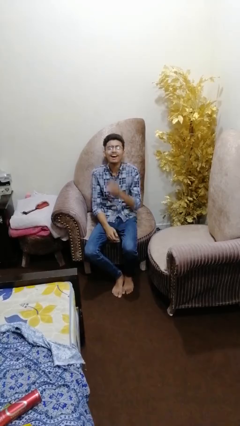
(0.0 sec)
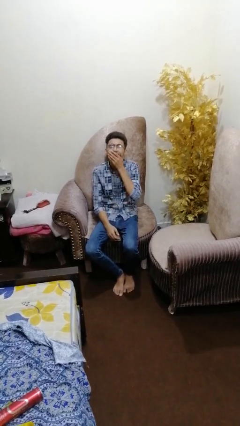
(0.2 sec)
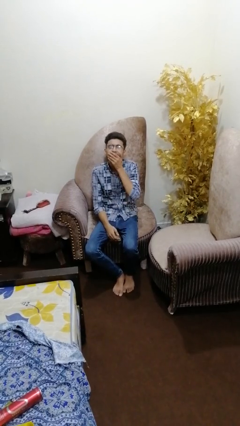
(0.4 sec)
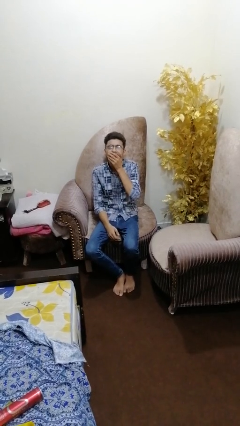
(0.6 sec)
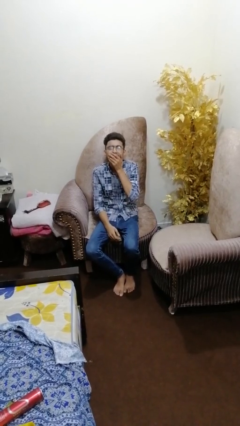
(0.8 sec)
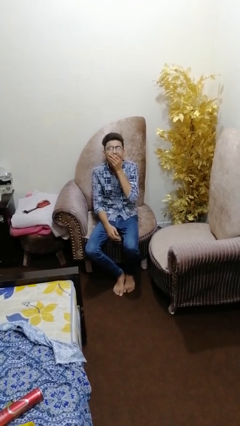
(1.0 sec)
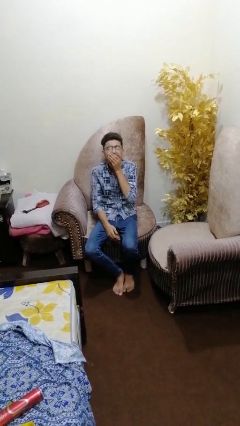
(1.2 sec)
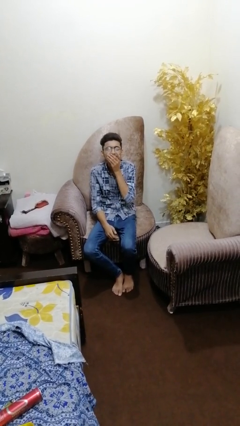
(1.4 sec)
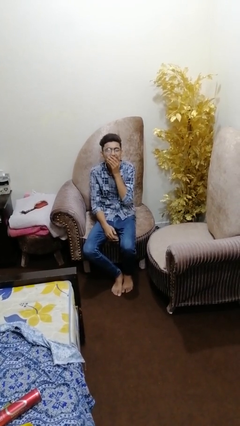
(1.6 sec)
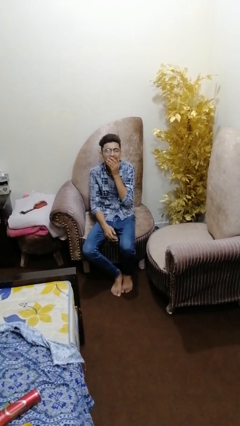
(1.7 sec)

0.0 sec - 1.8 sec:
person yawns

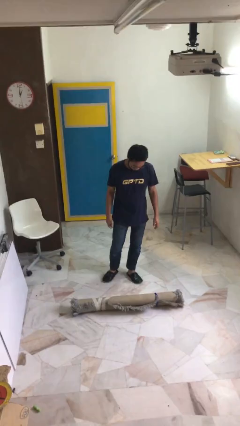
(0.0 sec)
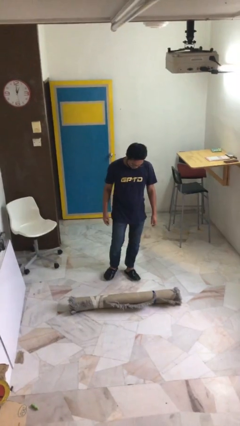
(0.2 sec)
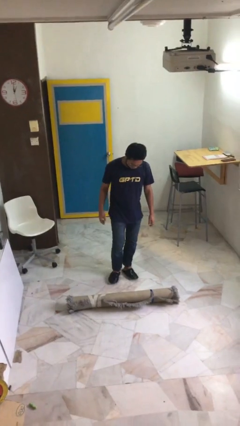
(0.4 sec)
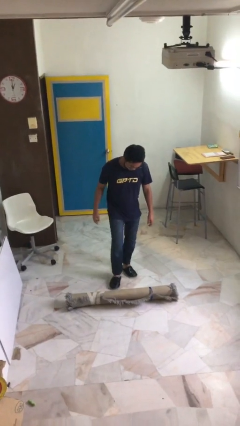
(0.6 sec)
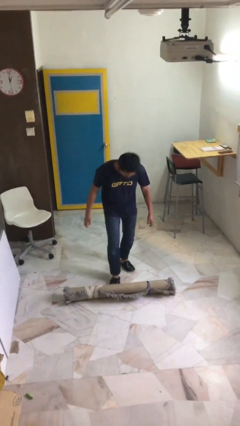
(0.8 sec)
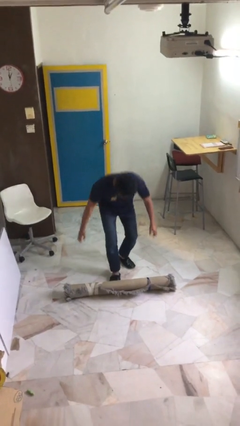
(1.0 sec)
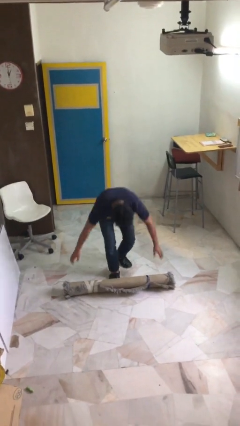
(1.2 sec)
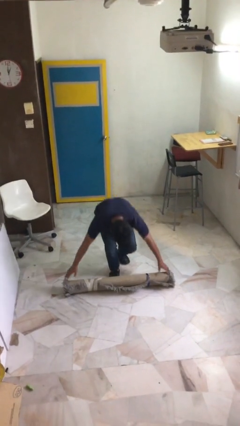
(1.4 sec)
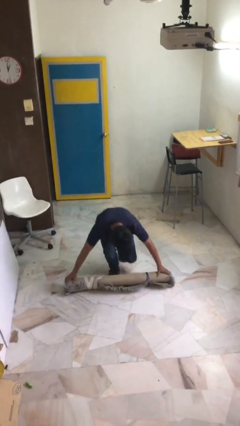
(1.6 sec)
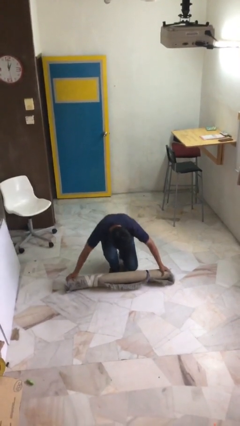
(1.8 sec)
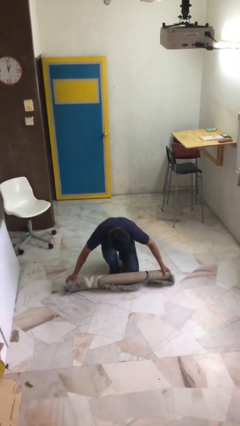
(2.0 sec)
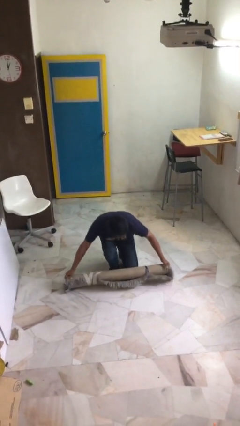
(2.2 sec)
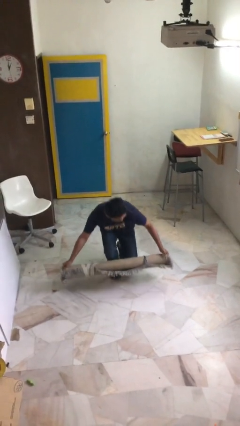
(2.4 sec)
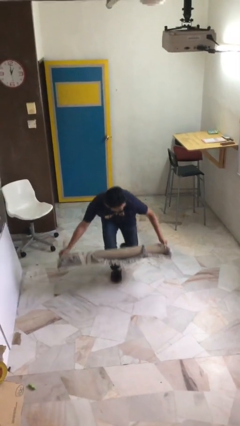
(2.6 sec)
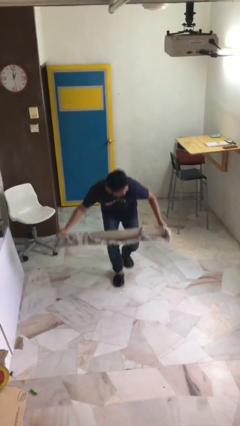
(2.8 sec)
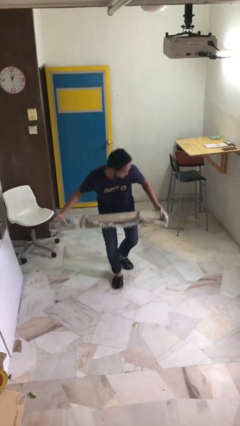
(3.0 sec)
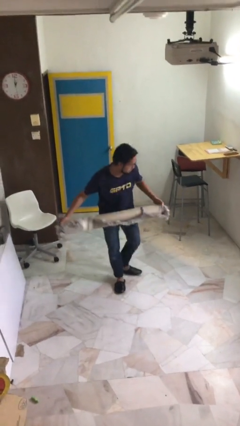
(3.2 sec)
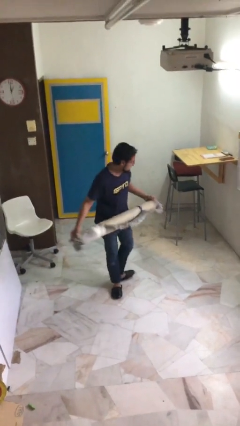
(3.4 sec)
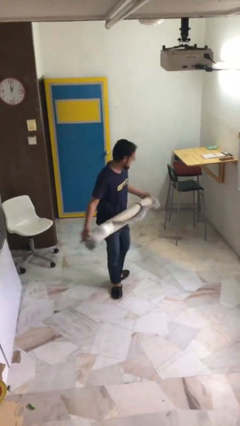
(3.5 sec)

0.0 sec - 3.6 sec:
person picks up object from floor

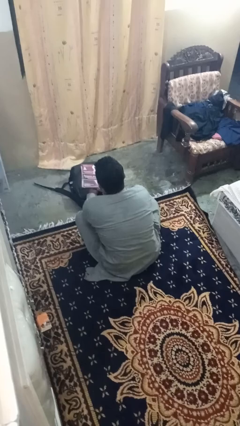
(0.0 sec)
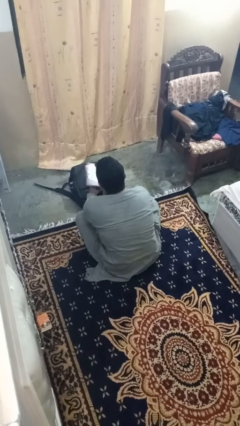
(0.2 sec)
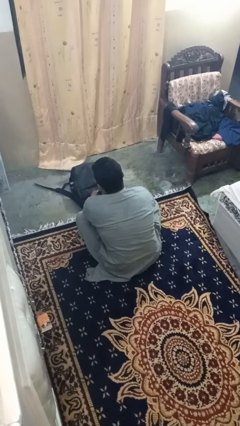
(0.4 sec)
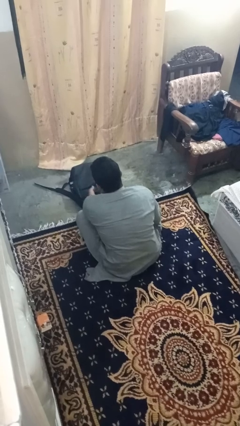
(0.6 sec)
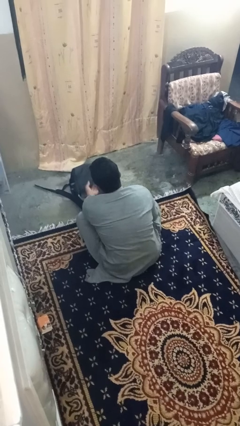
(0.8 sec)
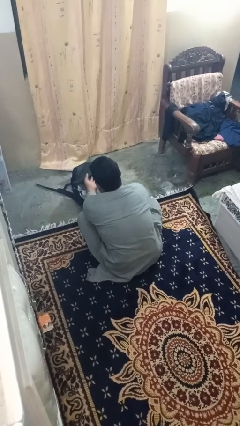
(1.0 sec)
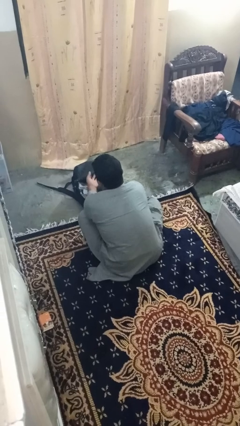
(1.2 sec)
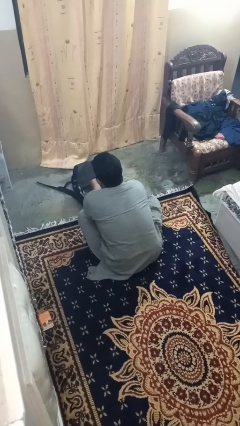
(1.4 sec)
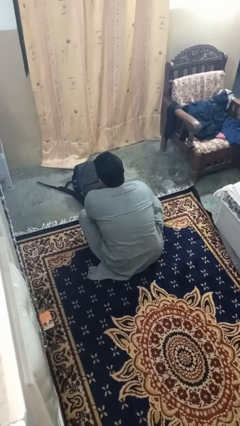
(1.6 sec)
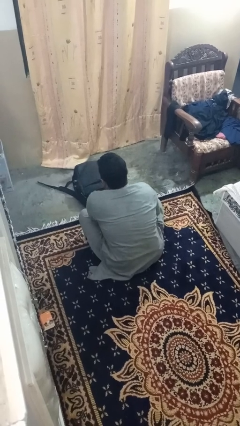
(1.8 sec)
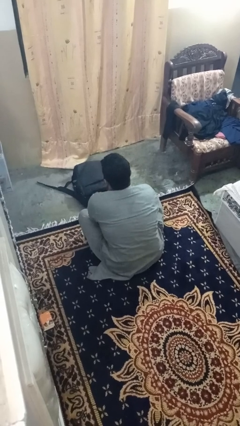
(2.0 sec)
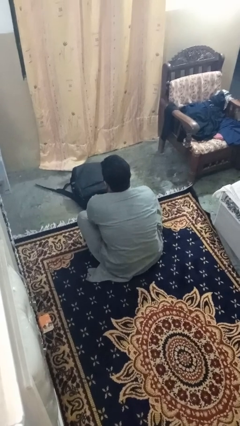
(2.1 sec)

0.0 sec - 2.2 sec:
person puts object into bag

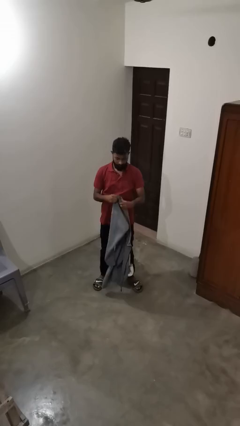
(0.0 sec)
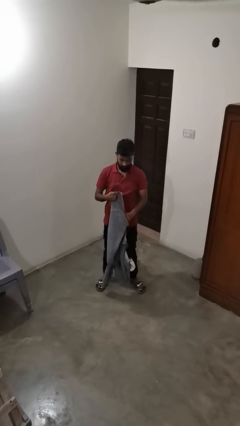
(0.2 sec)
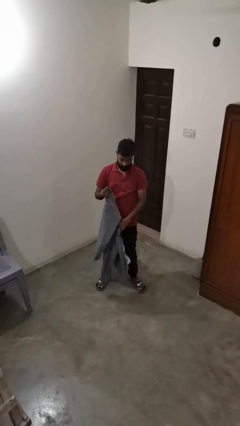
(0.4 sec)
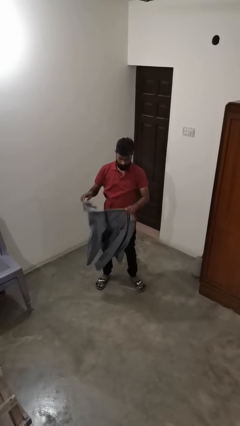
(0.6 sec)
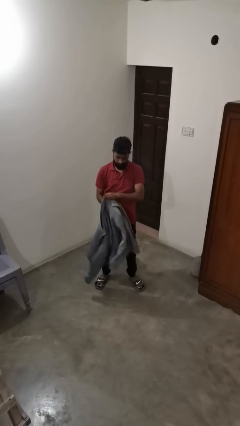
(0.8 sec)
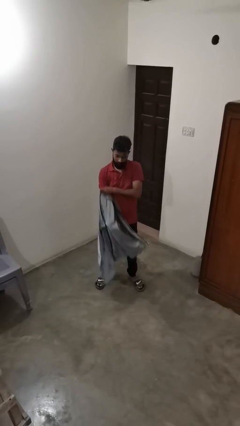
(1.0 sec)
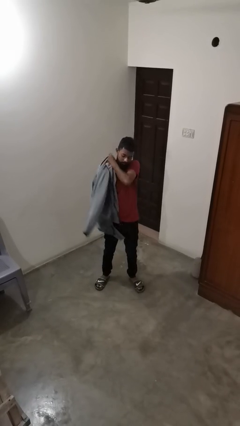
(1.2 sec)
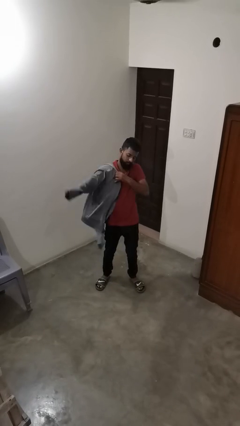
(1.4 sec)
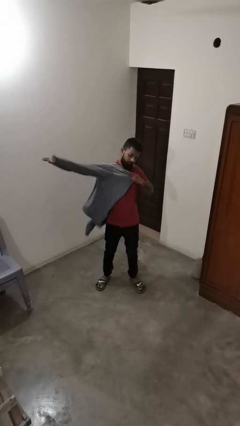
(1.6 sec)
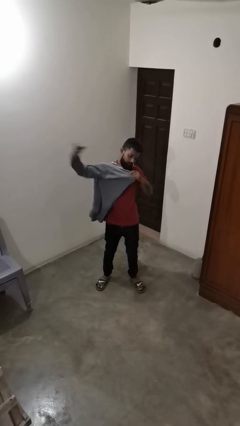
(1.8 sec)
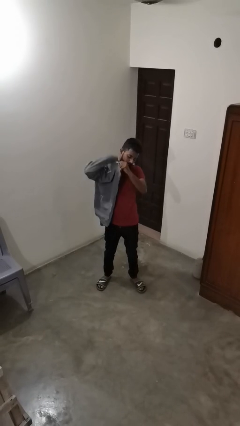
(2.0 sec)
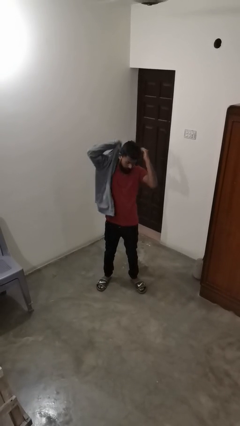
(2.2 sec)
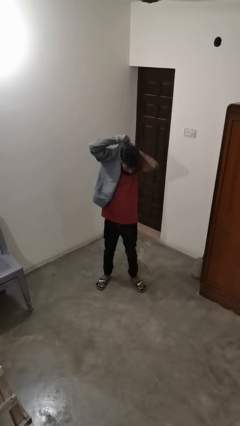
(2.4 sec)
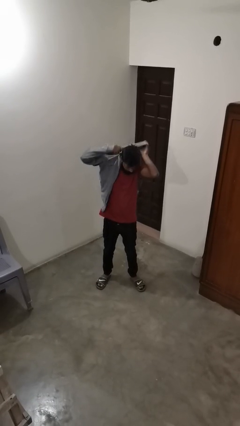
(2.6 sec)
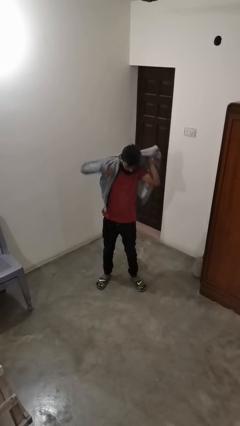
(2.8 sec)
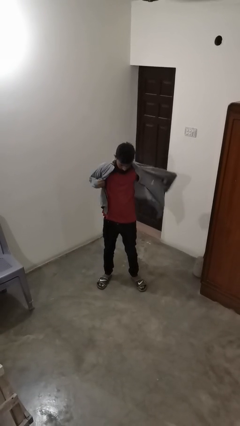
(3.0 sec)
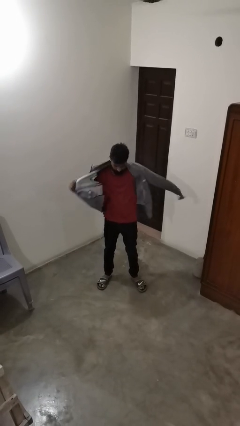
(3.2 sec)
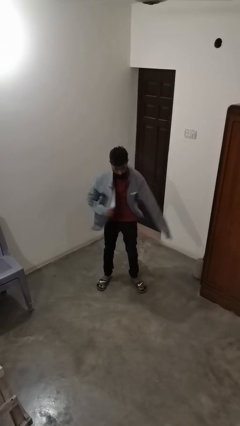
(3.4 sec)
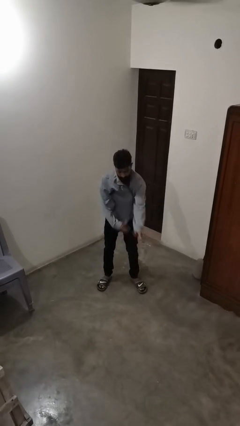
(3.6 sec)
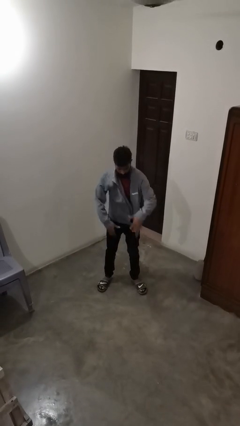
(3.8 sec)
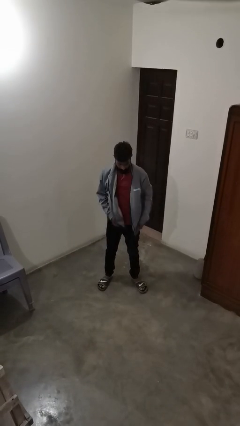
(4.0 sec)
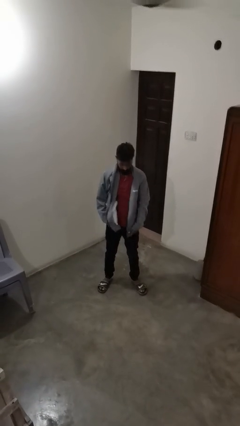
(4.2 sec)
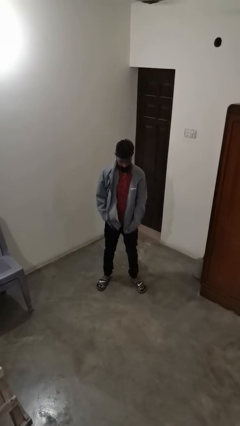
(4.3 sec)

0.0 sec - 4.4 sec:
person puts on jacket

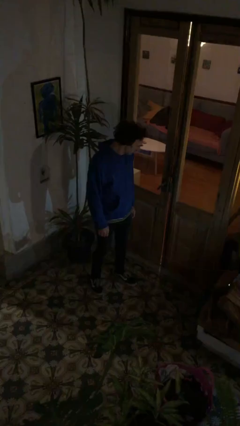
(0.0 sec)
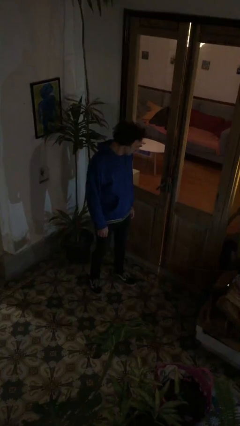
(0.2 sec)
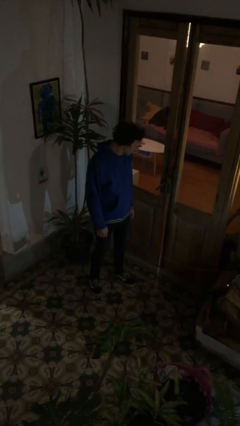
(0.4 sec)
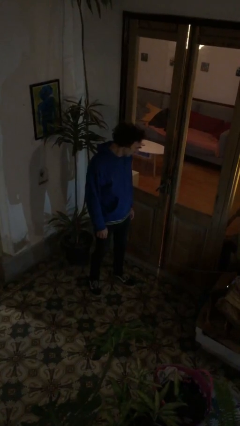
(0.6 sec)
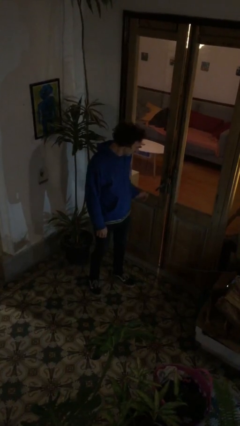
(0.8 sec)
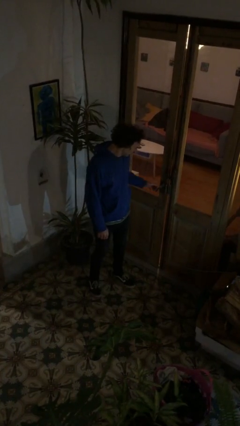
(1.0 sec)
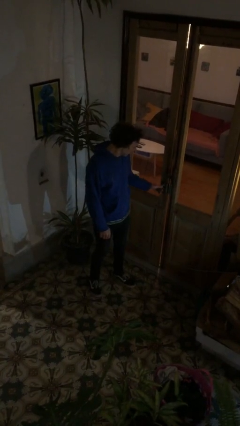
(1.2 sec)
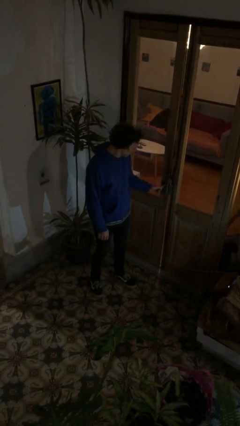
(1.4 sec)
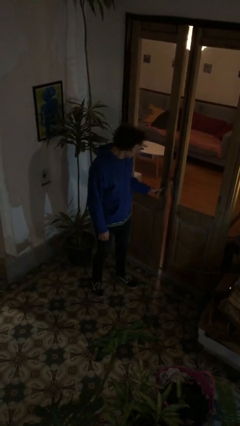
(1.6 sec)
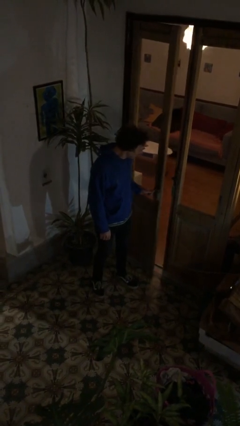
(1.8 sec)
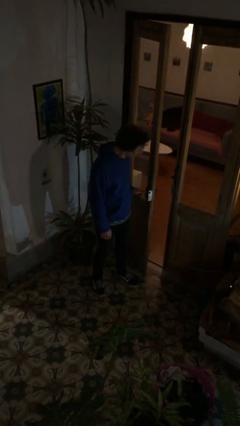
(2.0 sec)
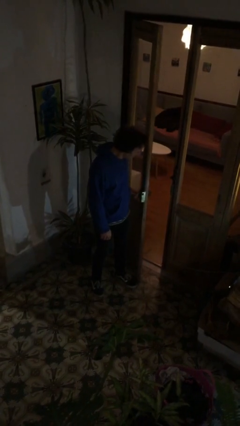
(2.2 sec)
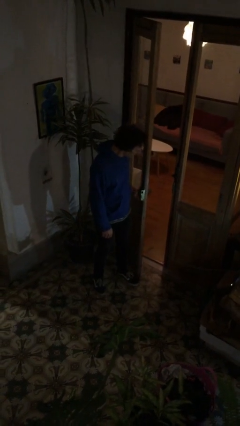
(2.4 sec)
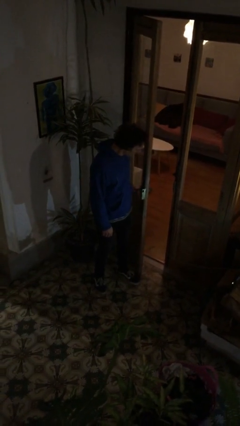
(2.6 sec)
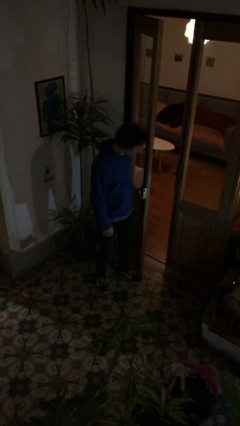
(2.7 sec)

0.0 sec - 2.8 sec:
person opens facility door

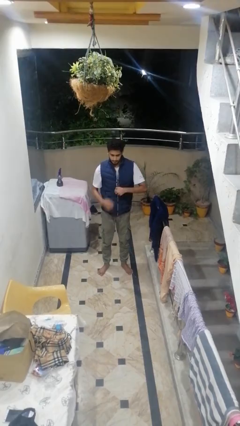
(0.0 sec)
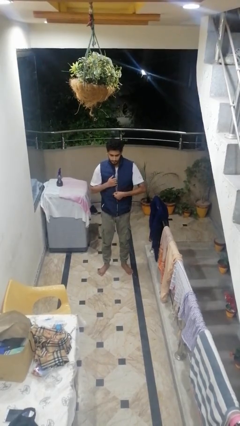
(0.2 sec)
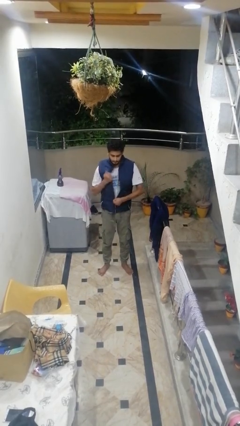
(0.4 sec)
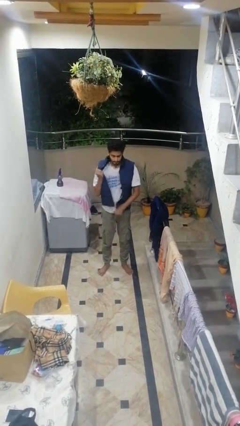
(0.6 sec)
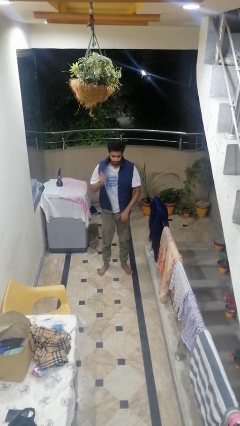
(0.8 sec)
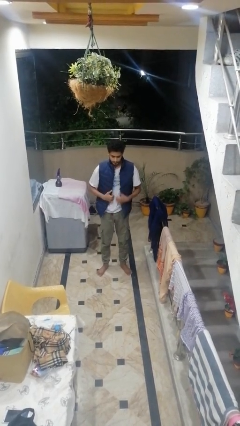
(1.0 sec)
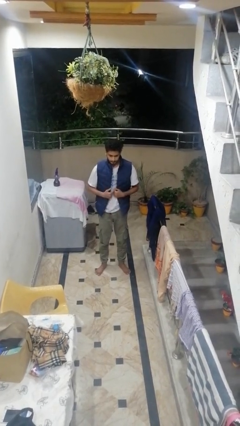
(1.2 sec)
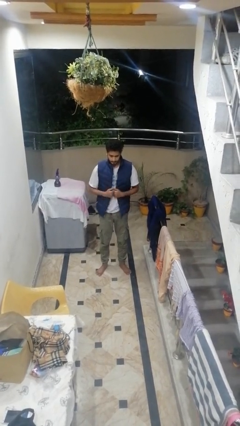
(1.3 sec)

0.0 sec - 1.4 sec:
person unzips jacket

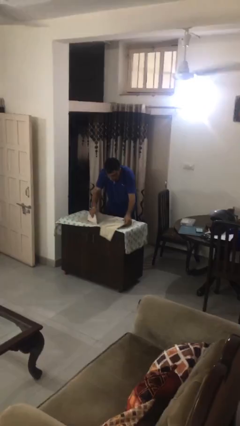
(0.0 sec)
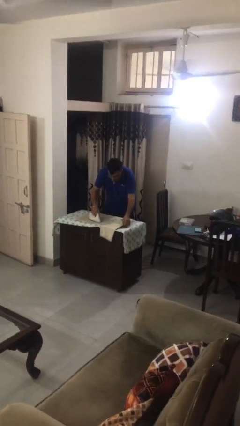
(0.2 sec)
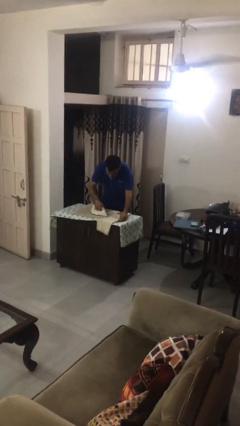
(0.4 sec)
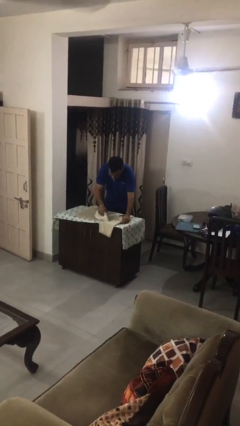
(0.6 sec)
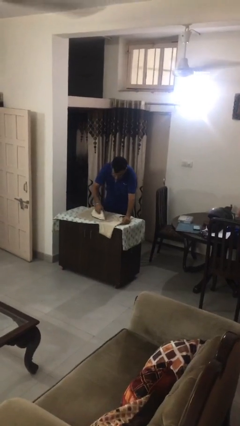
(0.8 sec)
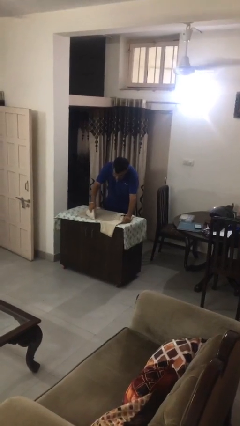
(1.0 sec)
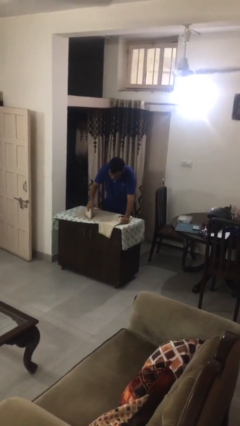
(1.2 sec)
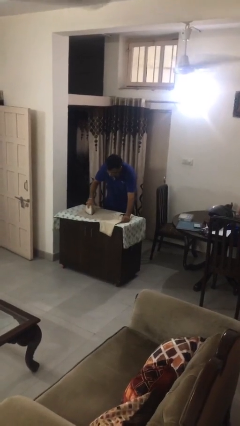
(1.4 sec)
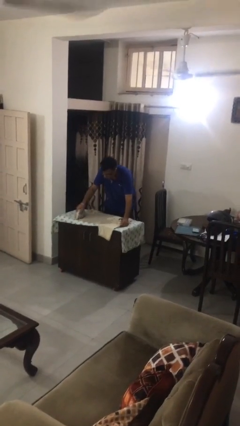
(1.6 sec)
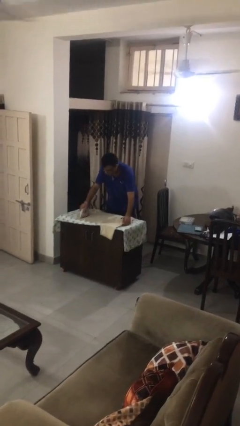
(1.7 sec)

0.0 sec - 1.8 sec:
person irons clothes
